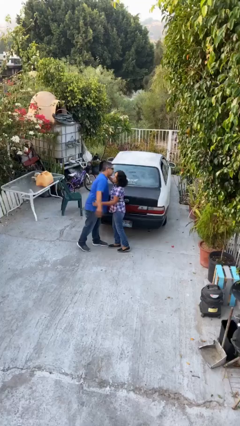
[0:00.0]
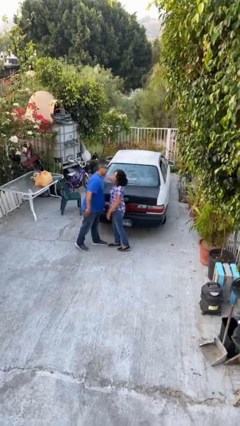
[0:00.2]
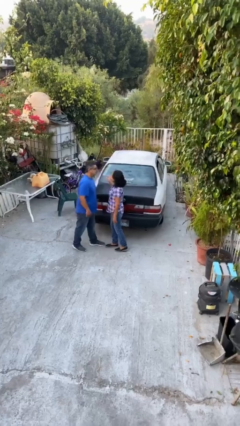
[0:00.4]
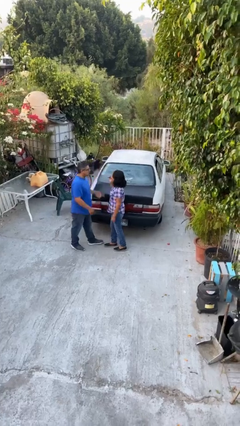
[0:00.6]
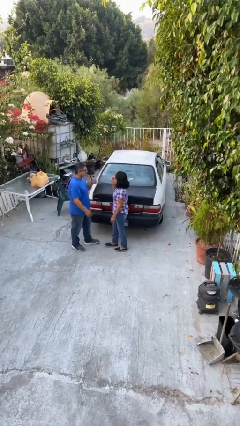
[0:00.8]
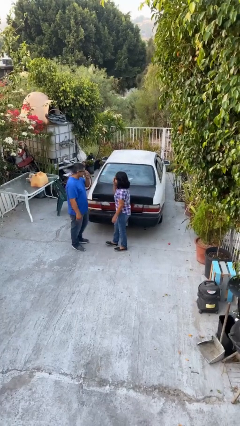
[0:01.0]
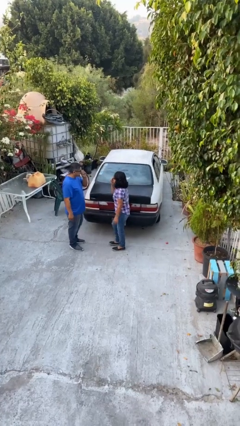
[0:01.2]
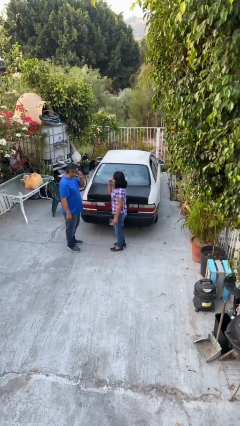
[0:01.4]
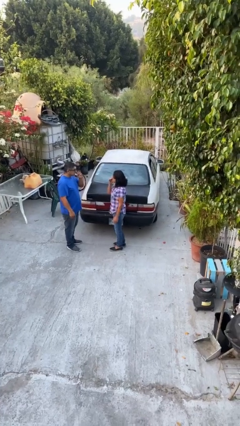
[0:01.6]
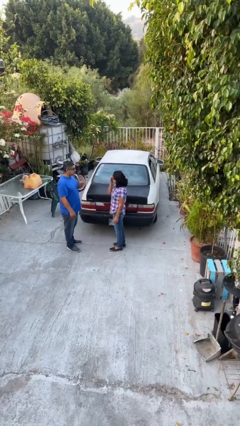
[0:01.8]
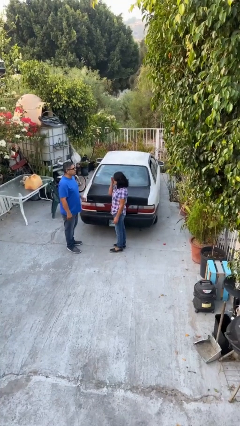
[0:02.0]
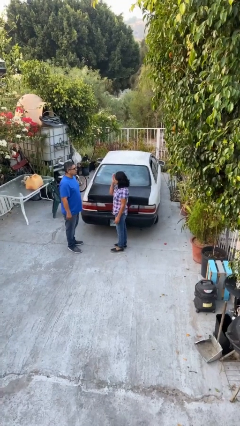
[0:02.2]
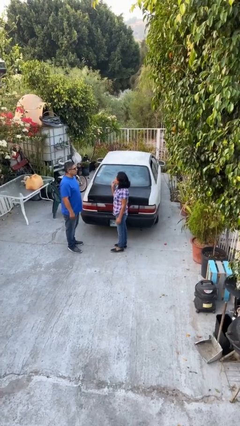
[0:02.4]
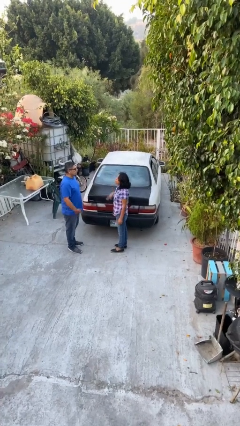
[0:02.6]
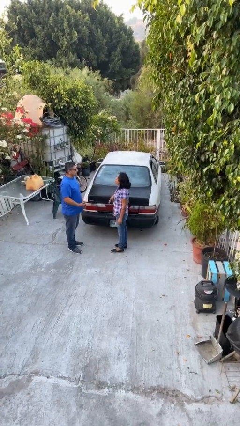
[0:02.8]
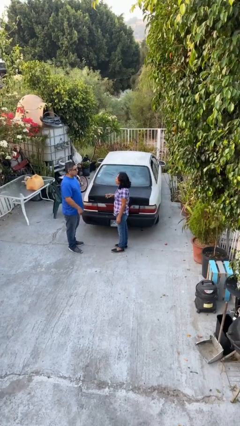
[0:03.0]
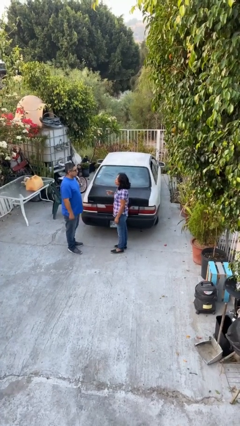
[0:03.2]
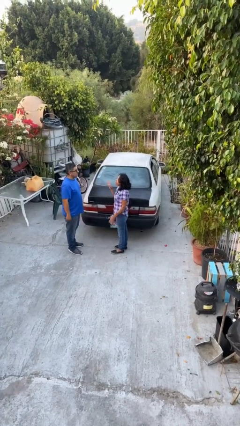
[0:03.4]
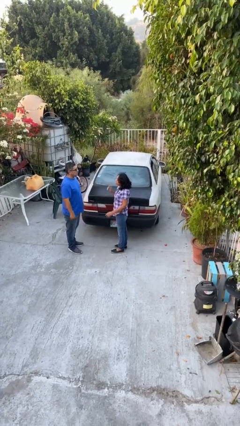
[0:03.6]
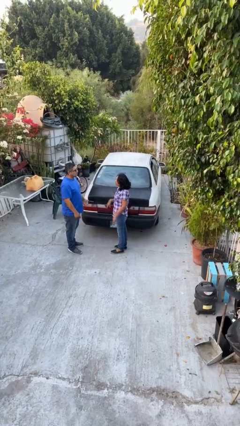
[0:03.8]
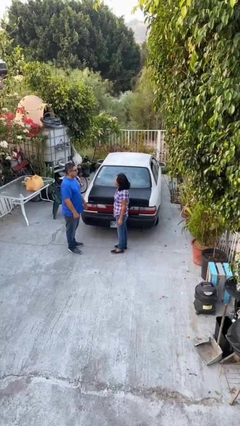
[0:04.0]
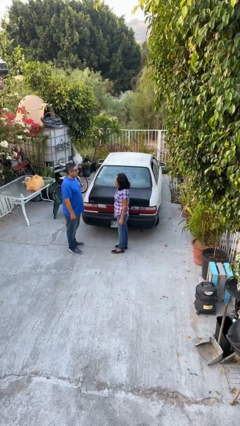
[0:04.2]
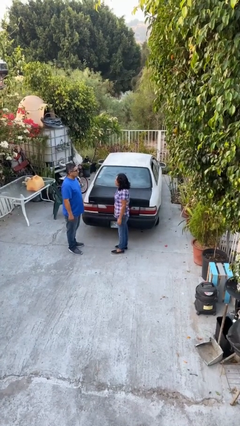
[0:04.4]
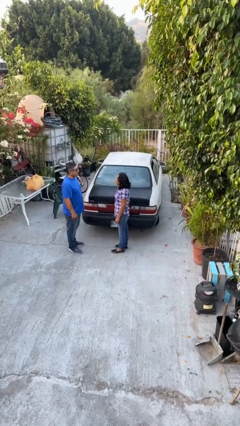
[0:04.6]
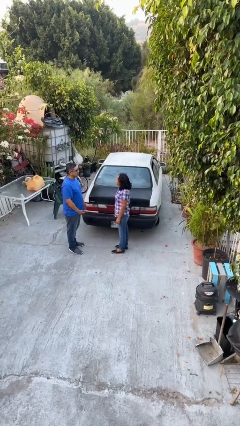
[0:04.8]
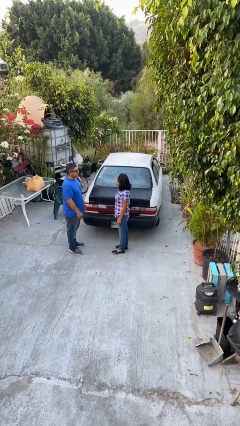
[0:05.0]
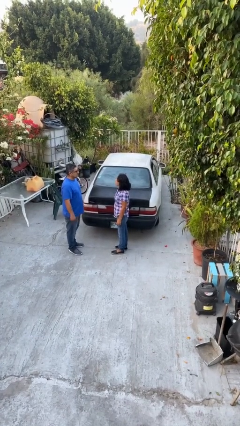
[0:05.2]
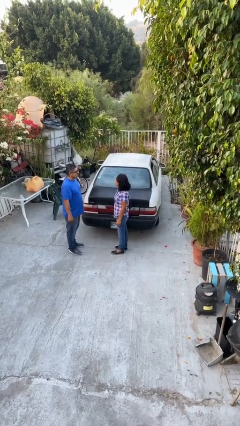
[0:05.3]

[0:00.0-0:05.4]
person talks to person

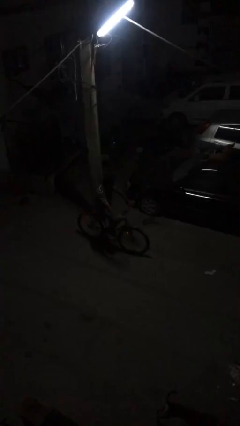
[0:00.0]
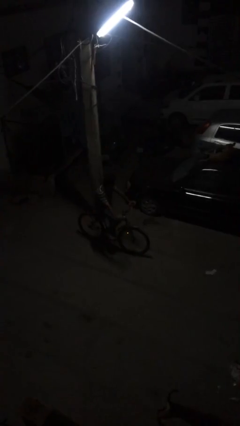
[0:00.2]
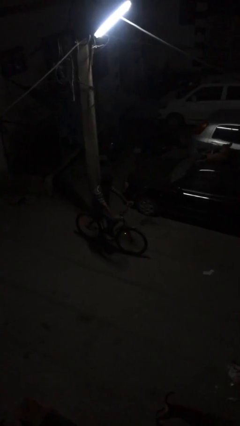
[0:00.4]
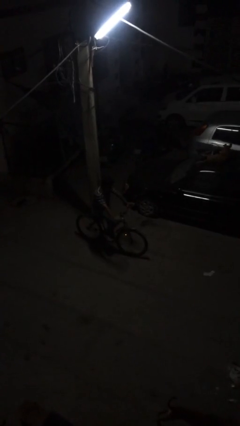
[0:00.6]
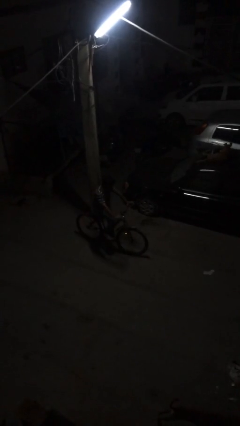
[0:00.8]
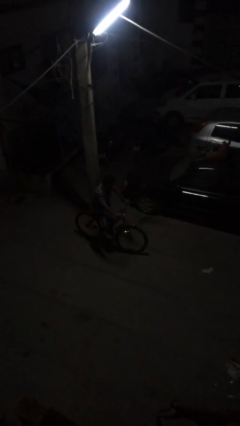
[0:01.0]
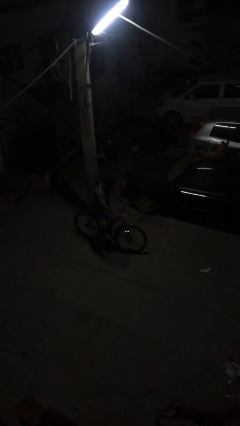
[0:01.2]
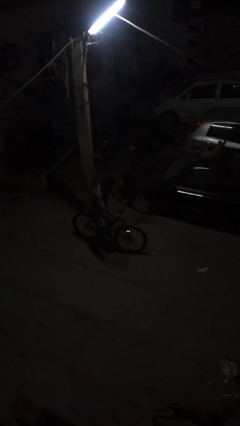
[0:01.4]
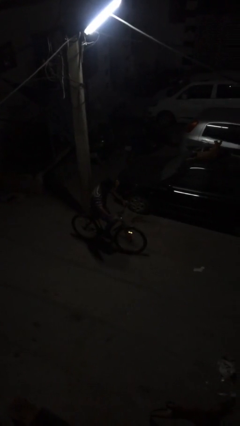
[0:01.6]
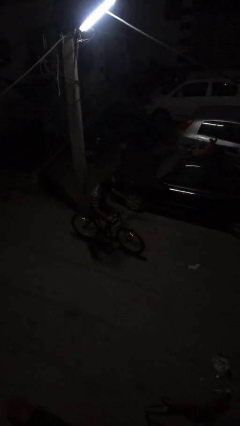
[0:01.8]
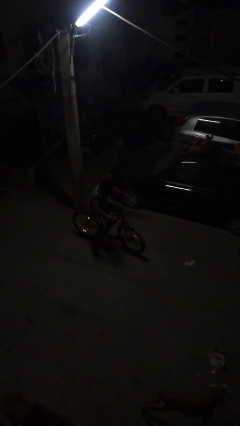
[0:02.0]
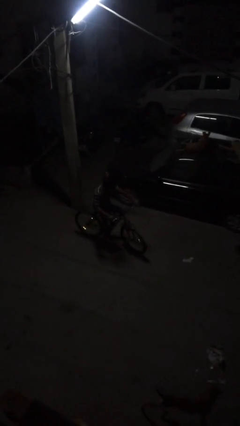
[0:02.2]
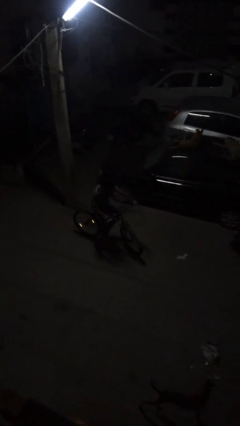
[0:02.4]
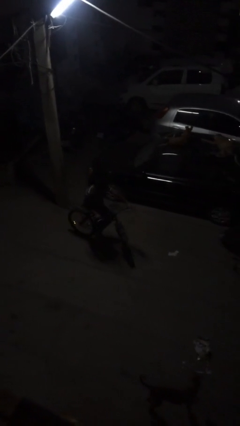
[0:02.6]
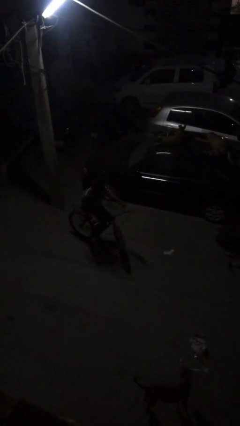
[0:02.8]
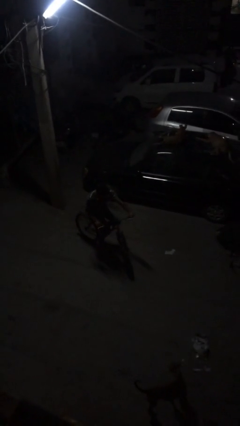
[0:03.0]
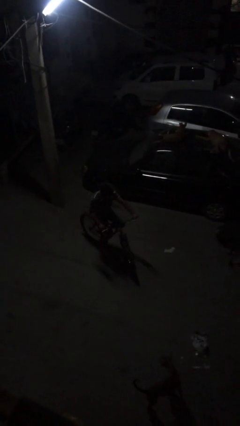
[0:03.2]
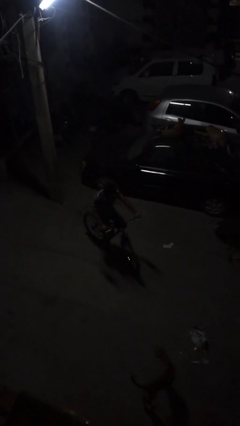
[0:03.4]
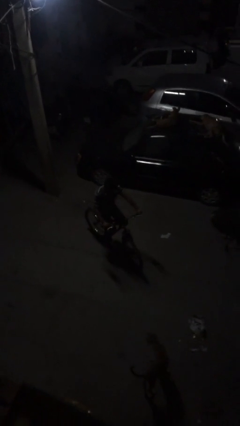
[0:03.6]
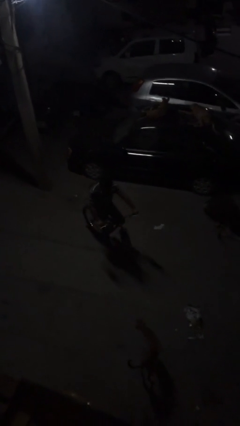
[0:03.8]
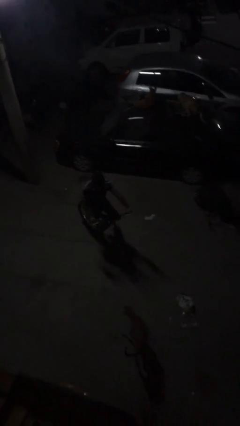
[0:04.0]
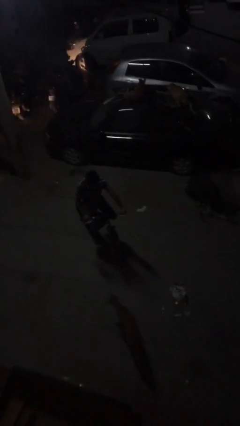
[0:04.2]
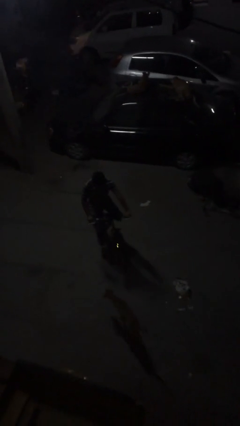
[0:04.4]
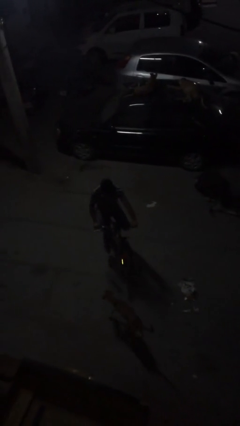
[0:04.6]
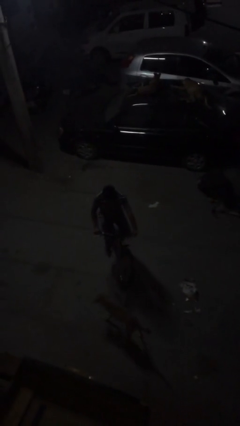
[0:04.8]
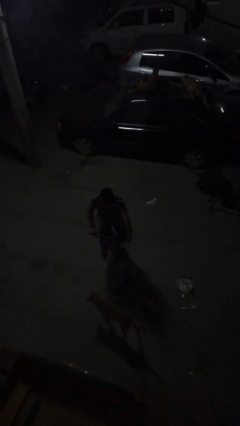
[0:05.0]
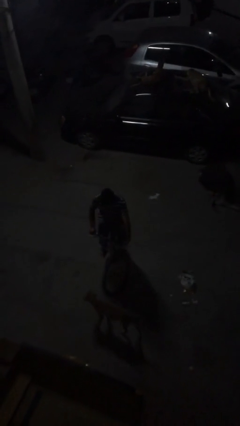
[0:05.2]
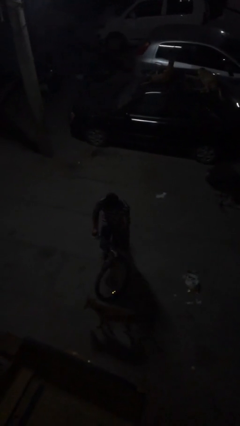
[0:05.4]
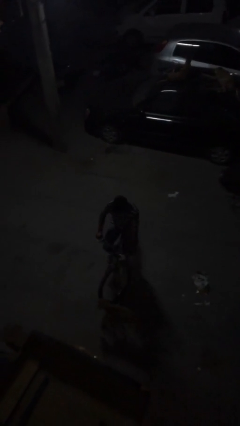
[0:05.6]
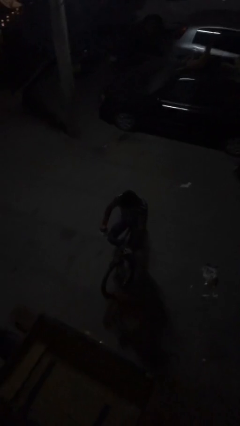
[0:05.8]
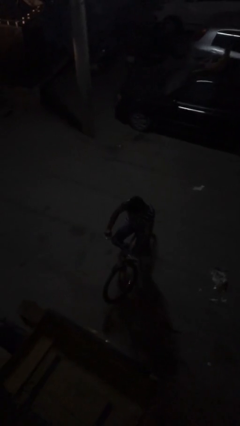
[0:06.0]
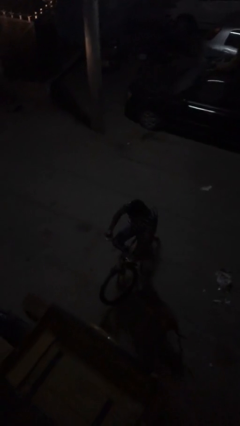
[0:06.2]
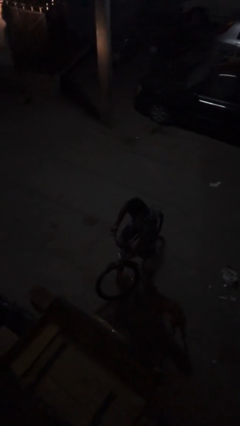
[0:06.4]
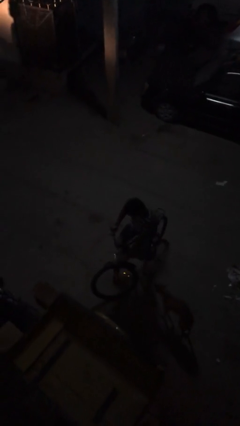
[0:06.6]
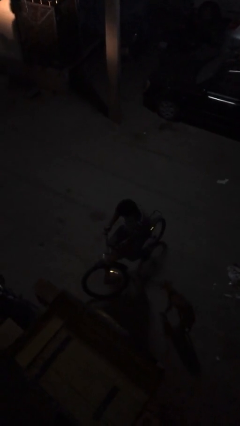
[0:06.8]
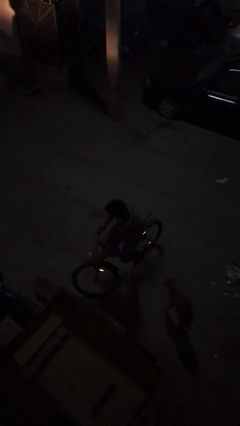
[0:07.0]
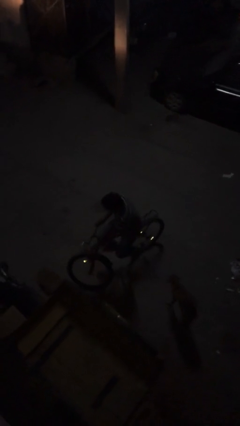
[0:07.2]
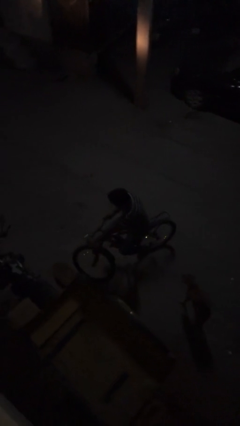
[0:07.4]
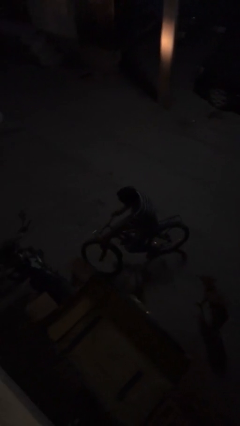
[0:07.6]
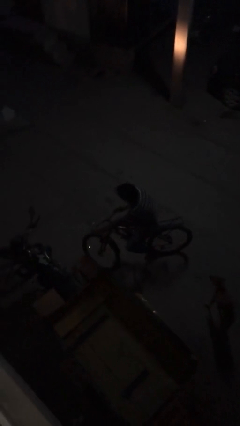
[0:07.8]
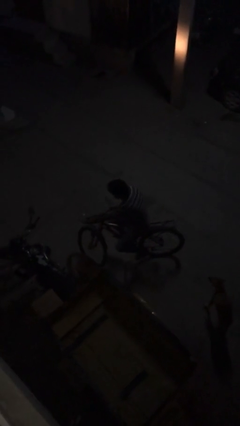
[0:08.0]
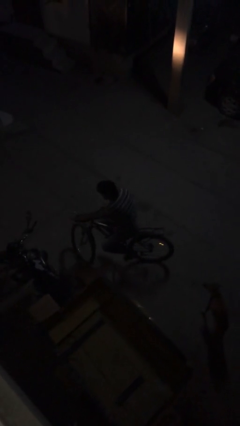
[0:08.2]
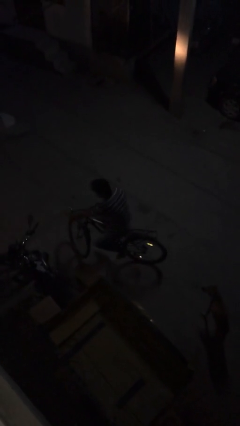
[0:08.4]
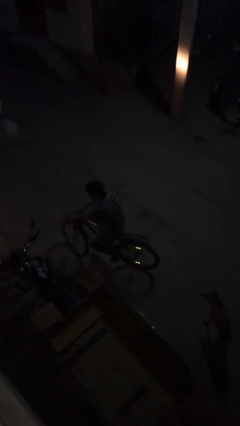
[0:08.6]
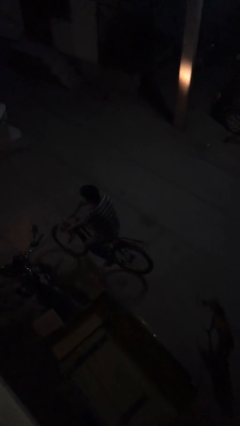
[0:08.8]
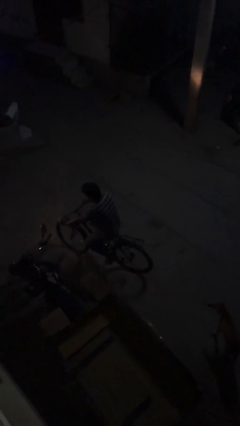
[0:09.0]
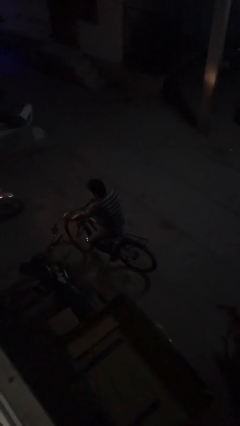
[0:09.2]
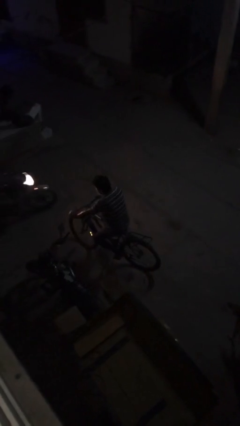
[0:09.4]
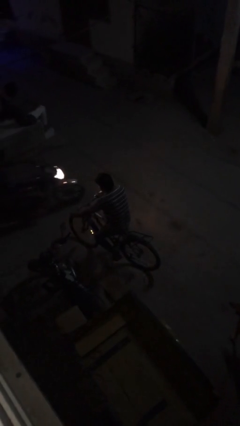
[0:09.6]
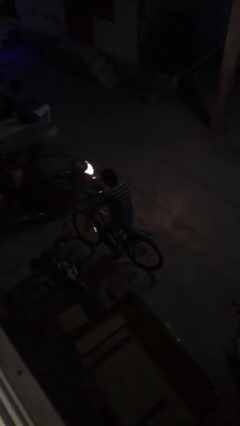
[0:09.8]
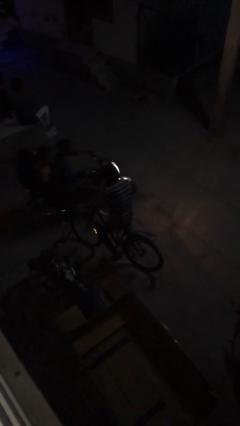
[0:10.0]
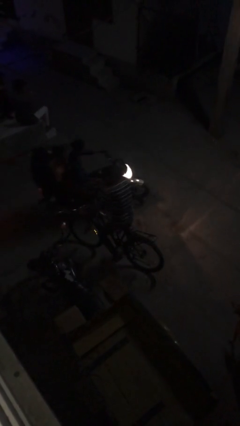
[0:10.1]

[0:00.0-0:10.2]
person rides bicycle

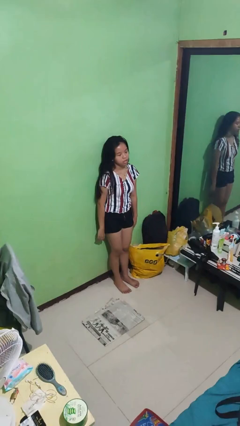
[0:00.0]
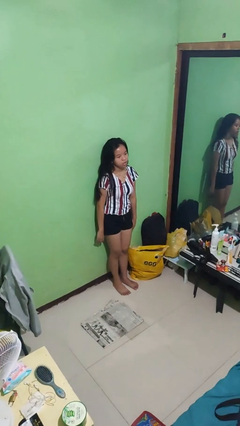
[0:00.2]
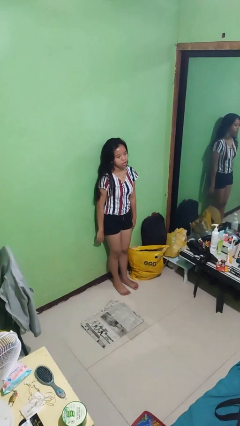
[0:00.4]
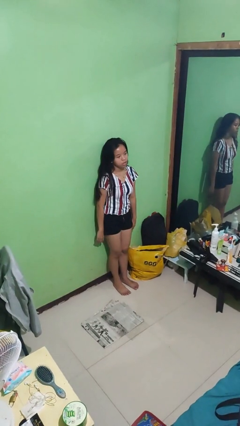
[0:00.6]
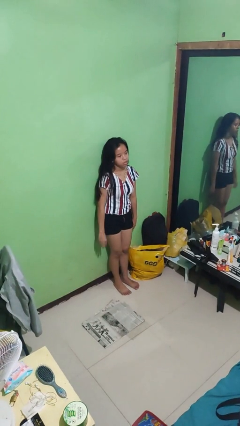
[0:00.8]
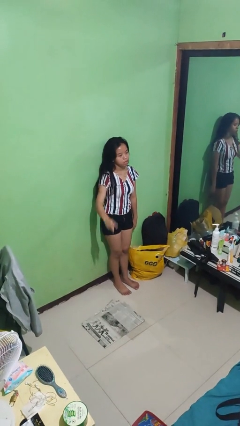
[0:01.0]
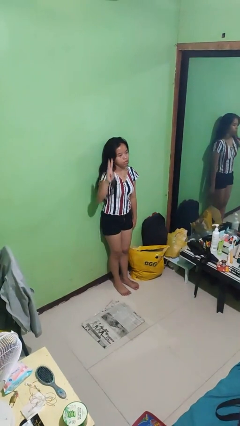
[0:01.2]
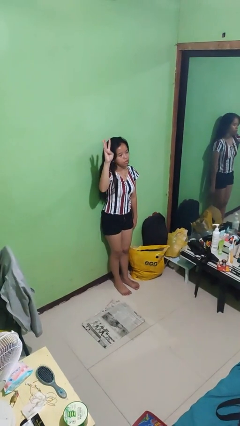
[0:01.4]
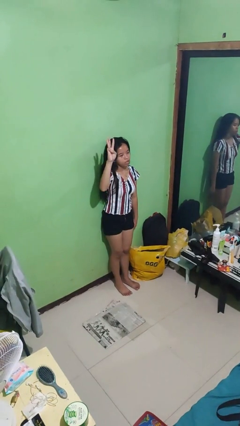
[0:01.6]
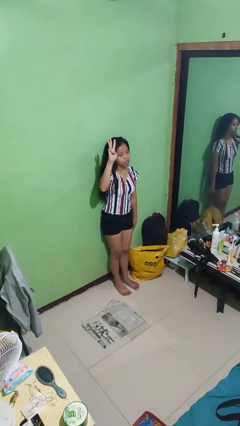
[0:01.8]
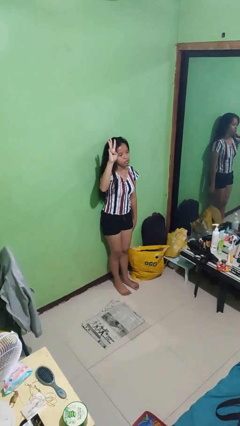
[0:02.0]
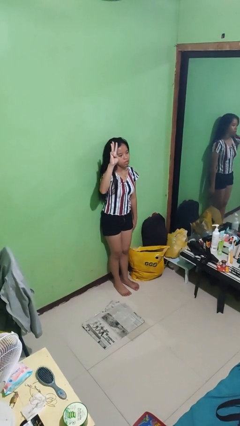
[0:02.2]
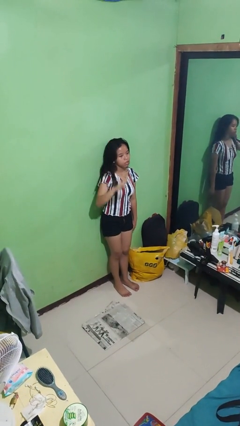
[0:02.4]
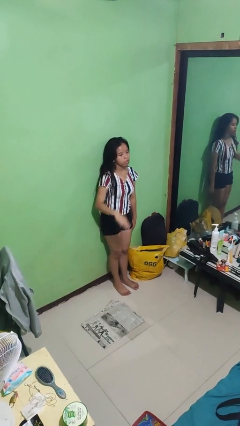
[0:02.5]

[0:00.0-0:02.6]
person gestures number three
